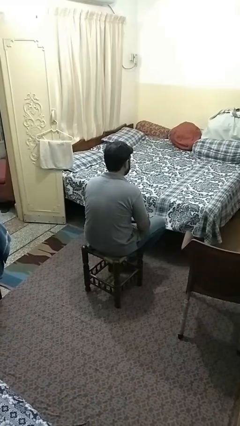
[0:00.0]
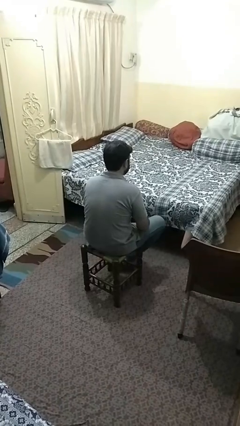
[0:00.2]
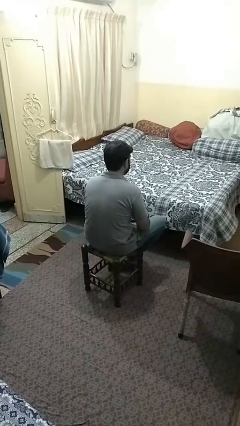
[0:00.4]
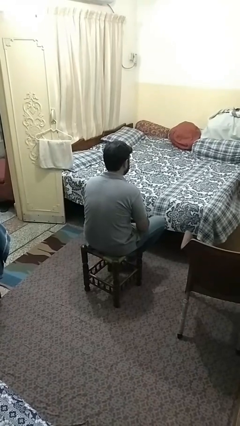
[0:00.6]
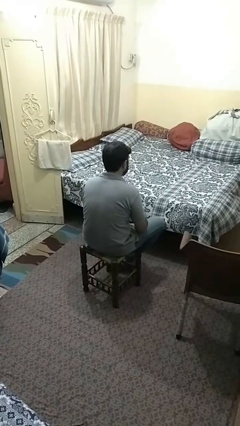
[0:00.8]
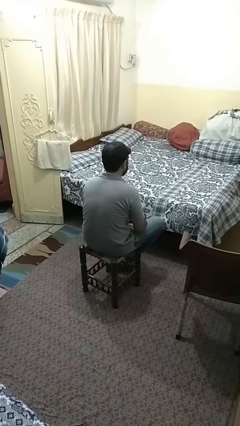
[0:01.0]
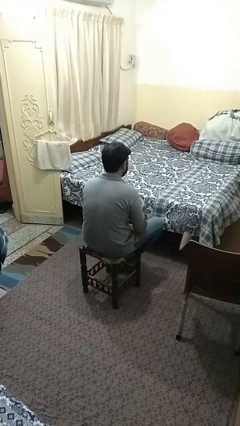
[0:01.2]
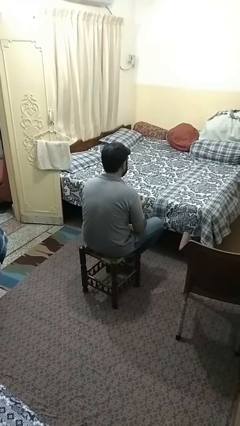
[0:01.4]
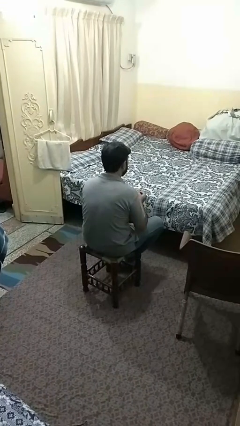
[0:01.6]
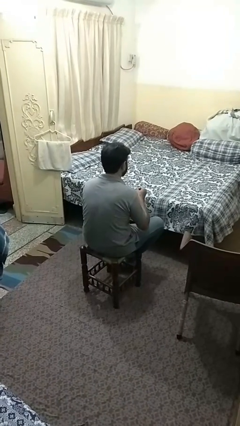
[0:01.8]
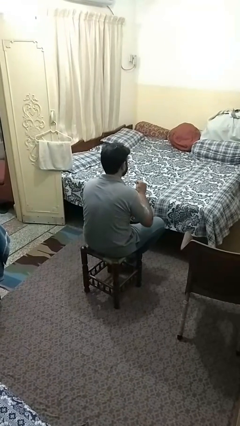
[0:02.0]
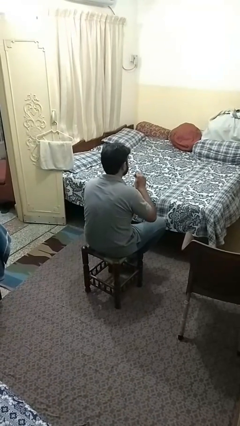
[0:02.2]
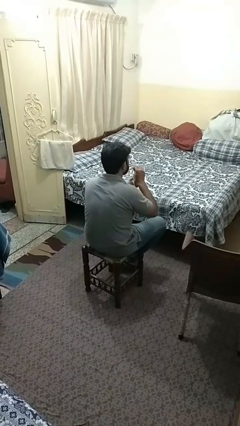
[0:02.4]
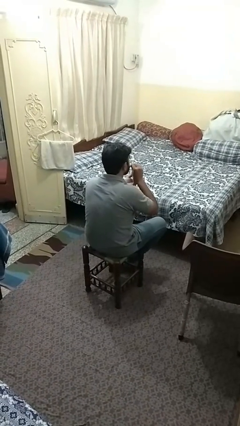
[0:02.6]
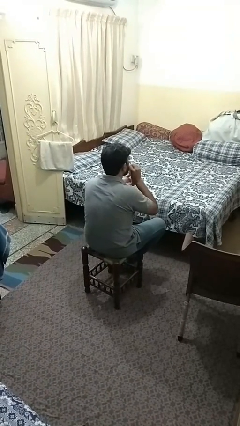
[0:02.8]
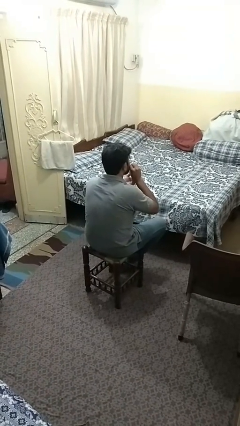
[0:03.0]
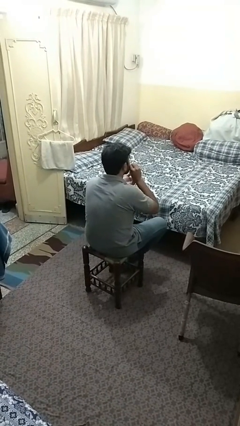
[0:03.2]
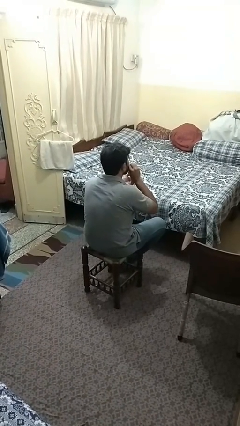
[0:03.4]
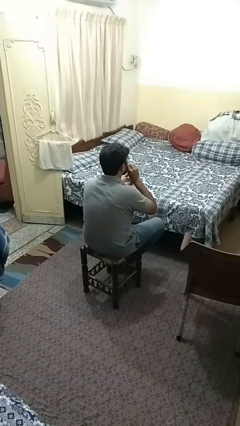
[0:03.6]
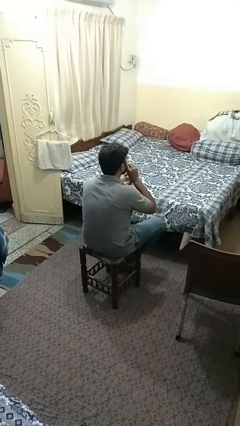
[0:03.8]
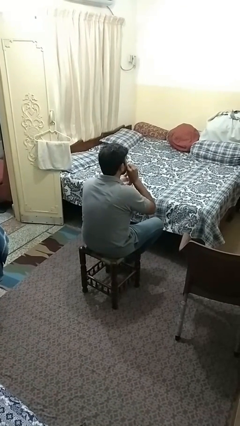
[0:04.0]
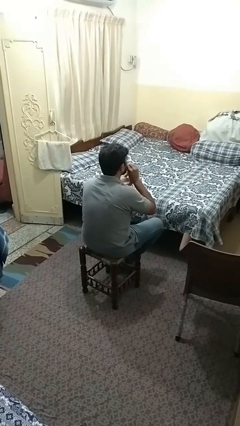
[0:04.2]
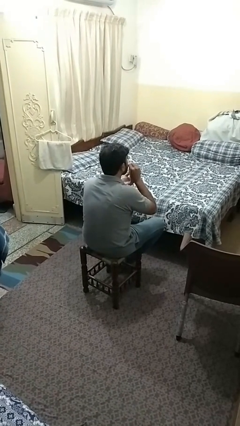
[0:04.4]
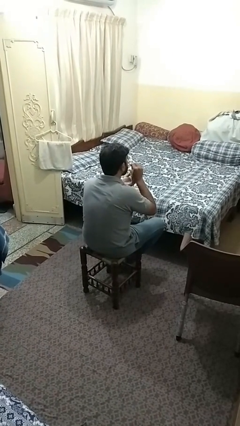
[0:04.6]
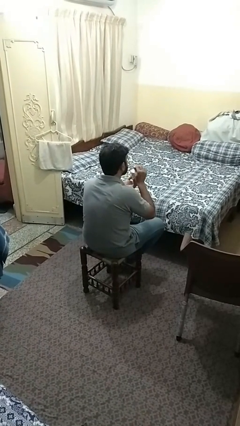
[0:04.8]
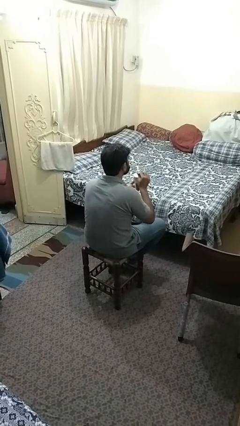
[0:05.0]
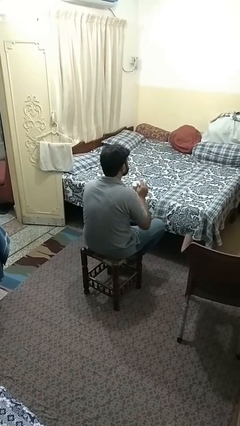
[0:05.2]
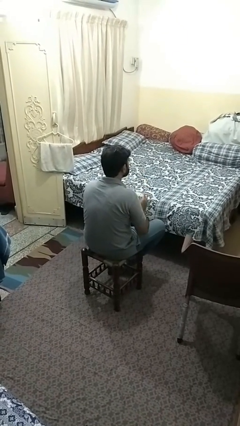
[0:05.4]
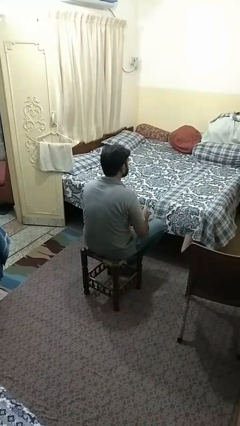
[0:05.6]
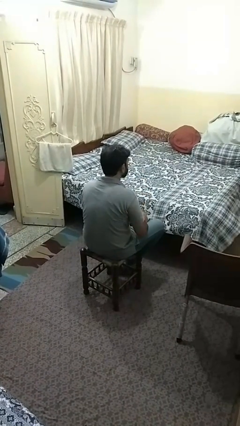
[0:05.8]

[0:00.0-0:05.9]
person drinks from straw

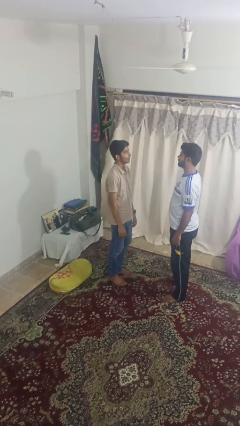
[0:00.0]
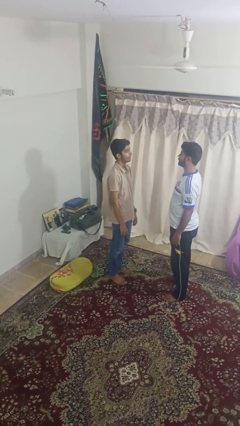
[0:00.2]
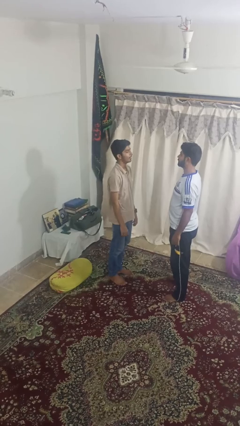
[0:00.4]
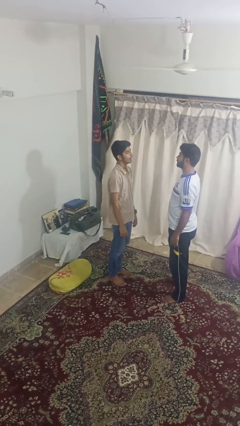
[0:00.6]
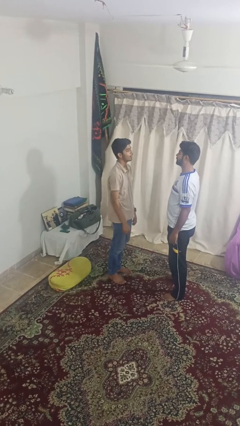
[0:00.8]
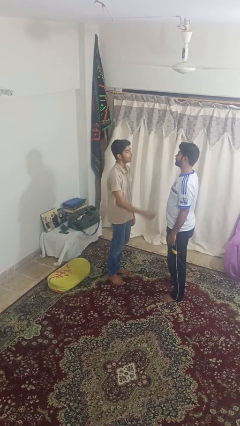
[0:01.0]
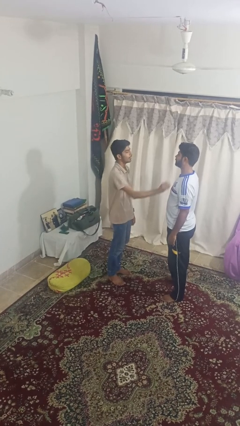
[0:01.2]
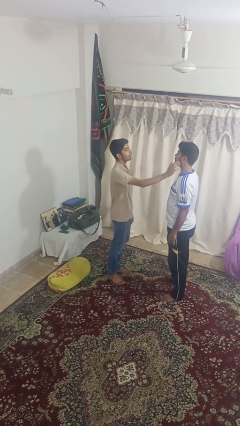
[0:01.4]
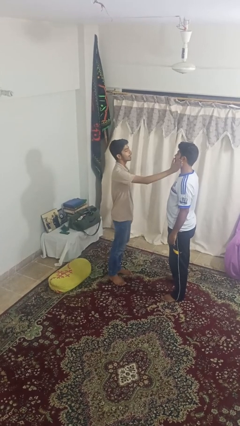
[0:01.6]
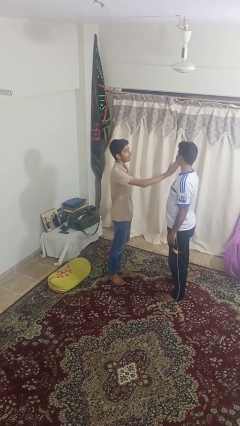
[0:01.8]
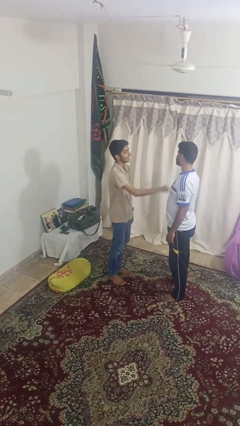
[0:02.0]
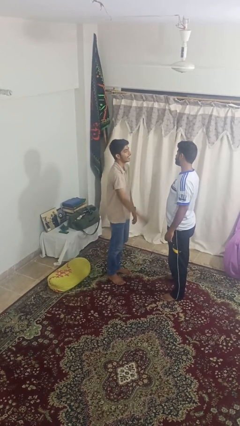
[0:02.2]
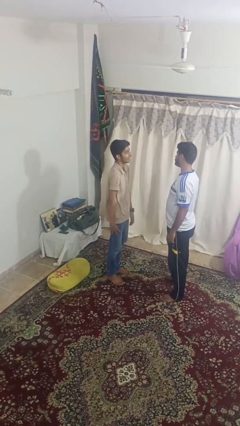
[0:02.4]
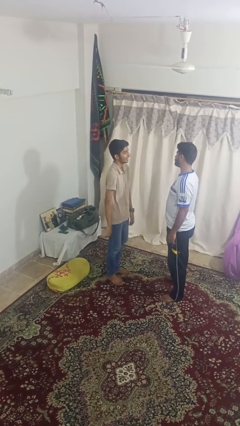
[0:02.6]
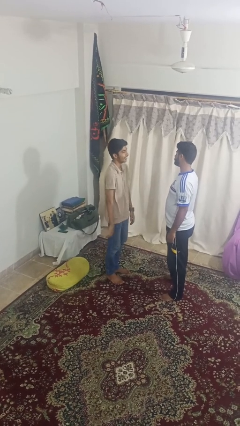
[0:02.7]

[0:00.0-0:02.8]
person touches face of person

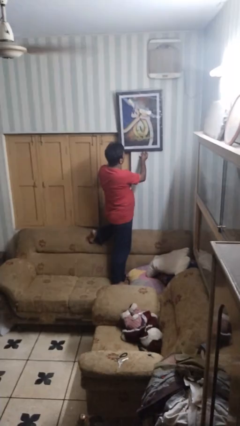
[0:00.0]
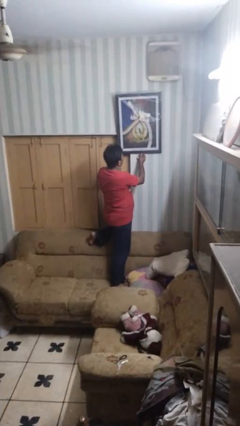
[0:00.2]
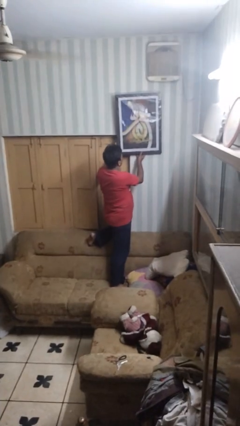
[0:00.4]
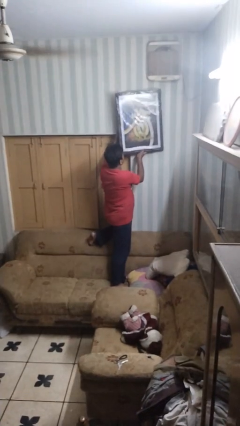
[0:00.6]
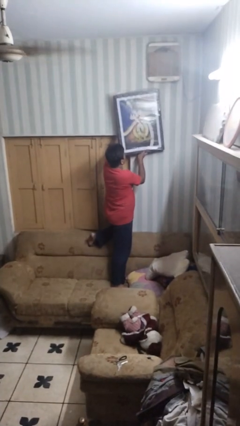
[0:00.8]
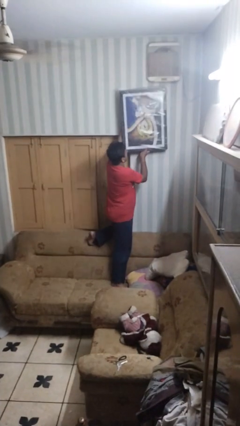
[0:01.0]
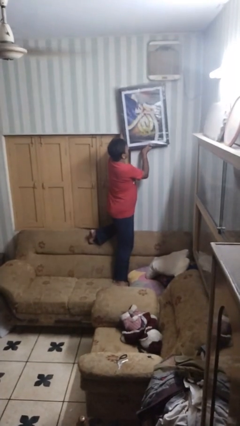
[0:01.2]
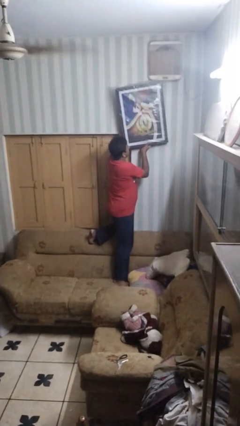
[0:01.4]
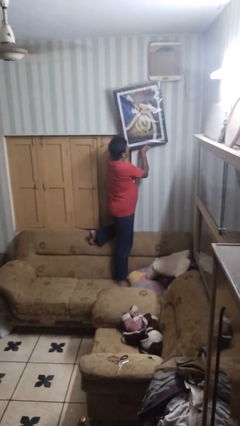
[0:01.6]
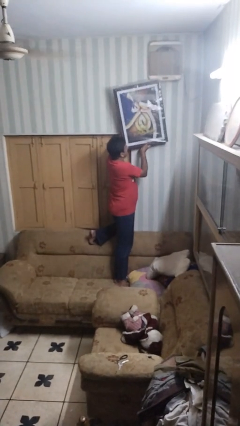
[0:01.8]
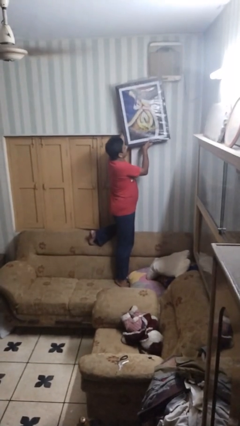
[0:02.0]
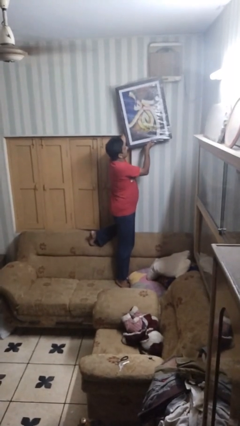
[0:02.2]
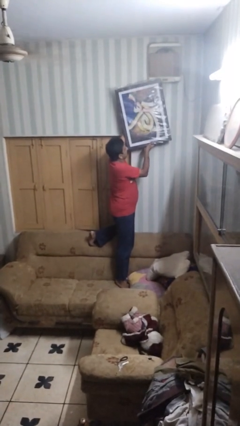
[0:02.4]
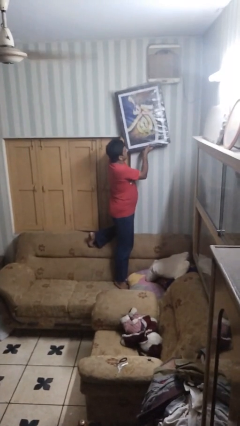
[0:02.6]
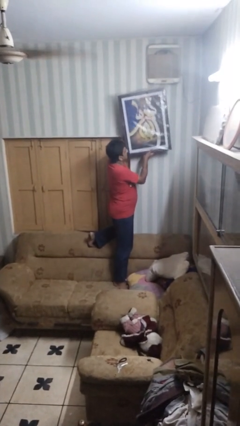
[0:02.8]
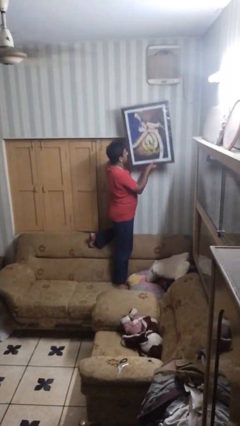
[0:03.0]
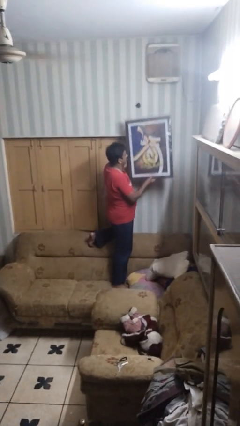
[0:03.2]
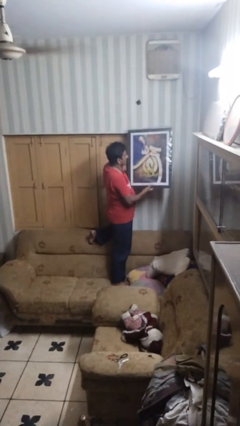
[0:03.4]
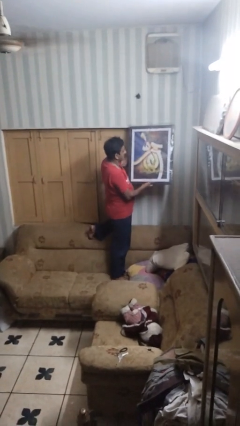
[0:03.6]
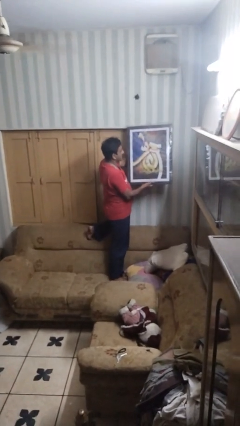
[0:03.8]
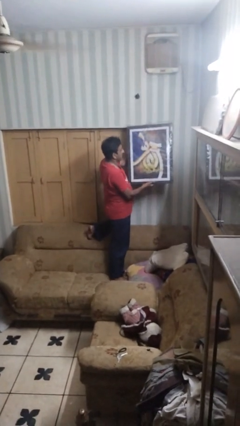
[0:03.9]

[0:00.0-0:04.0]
person takes down picture frame

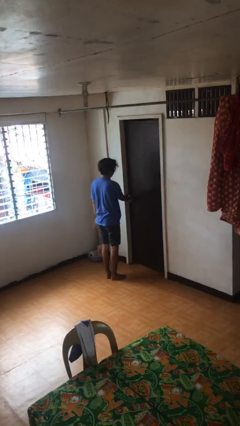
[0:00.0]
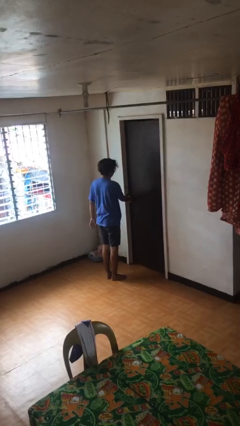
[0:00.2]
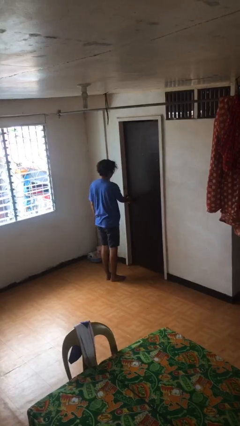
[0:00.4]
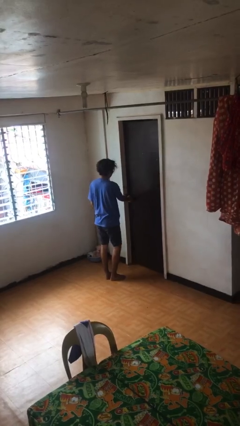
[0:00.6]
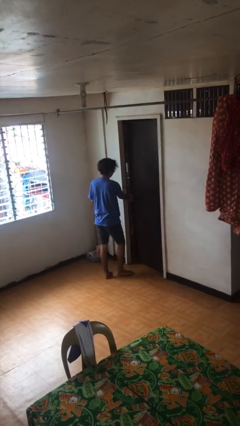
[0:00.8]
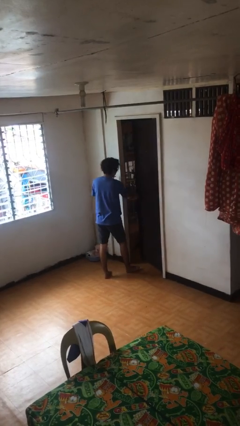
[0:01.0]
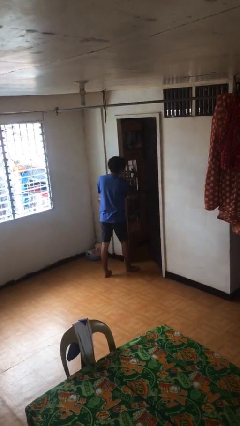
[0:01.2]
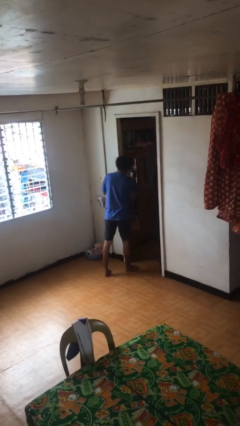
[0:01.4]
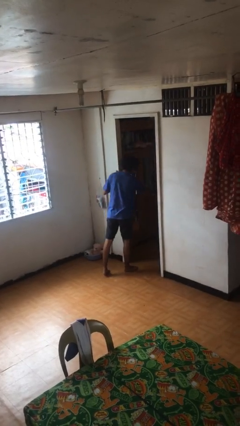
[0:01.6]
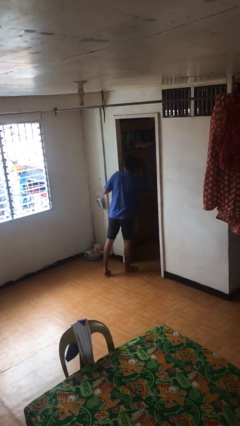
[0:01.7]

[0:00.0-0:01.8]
person opens facility door

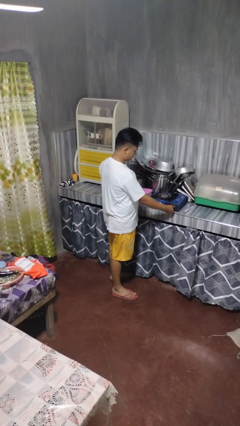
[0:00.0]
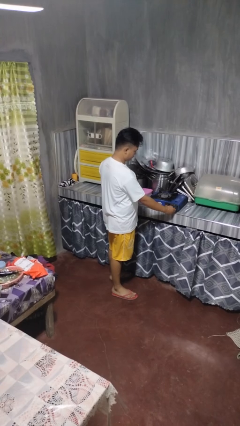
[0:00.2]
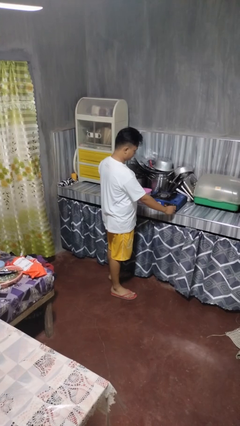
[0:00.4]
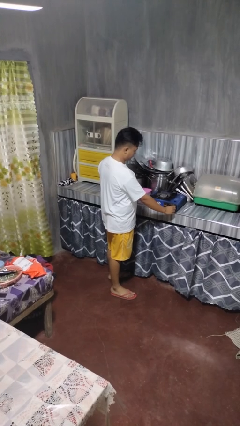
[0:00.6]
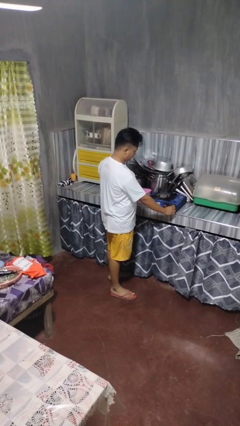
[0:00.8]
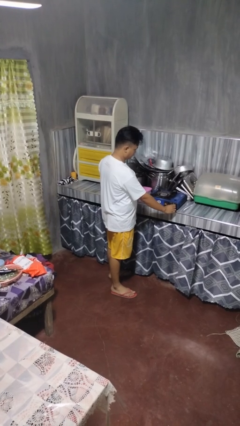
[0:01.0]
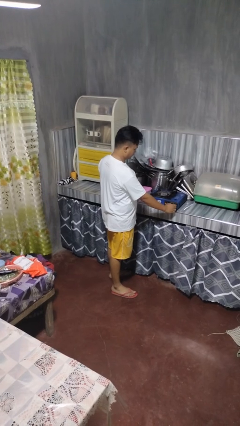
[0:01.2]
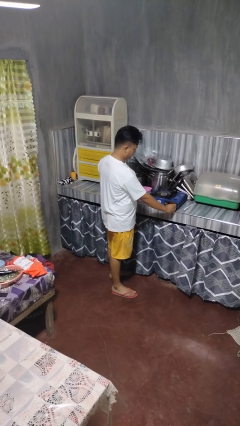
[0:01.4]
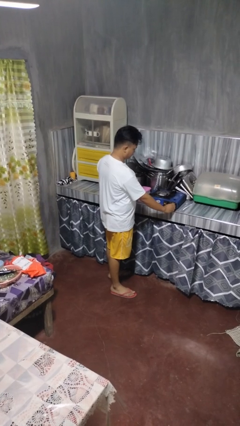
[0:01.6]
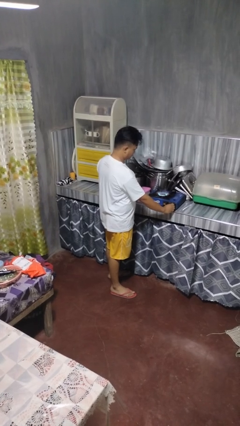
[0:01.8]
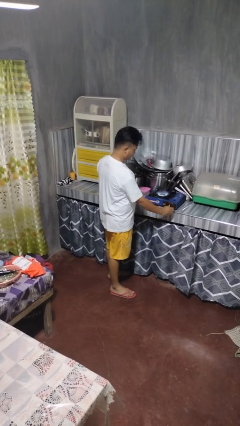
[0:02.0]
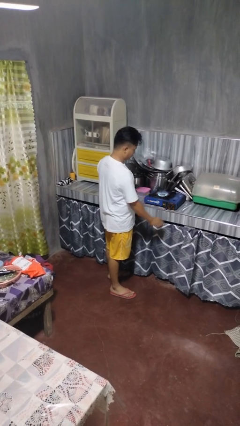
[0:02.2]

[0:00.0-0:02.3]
person turns on stovetop

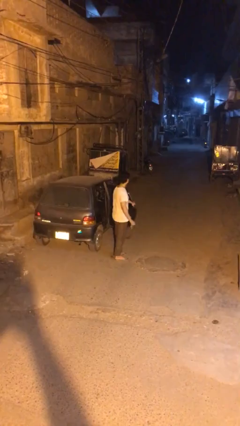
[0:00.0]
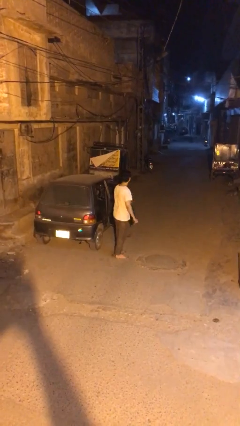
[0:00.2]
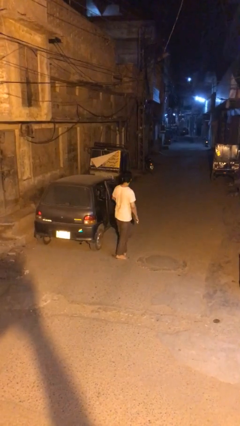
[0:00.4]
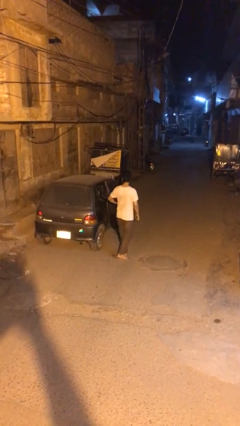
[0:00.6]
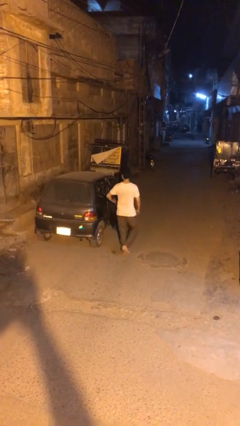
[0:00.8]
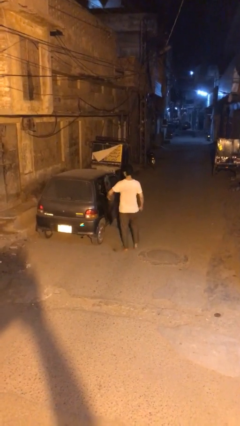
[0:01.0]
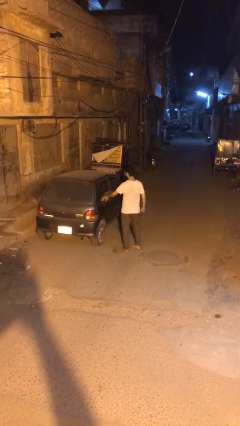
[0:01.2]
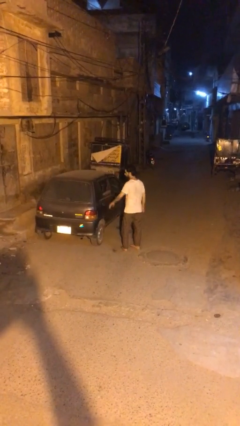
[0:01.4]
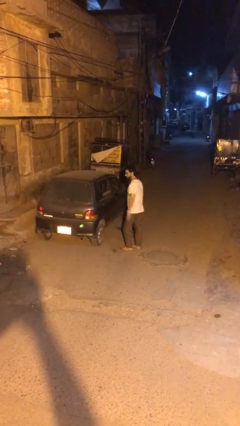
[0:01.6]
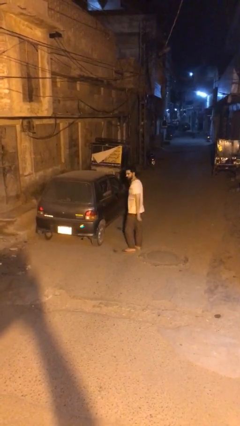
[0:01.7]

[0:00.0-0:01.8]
person closes car door
